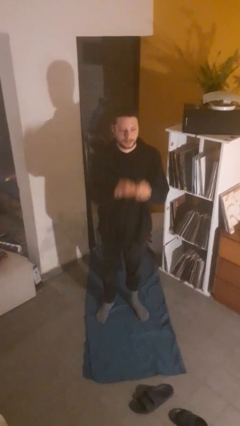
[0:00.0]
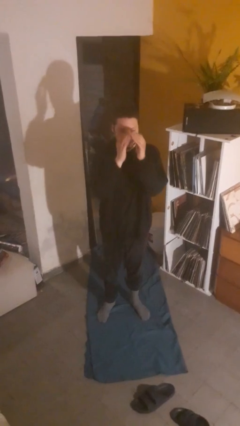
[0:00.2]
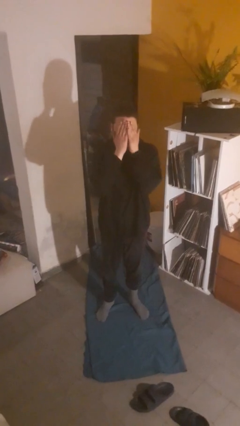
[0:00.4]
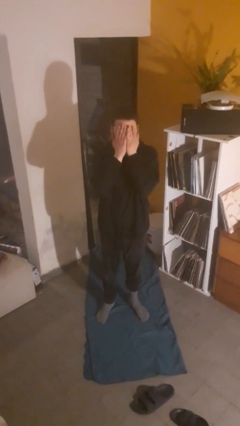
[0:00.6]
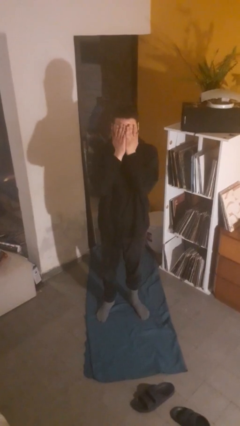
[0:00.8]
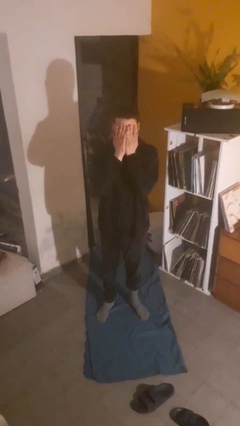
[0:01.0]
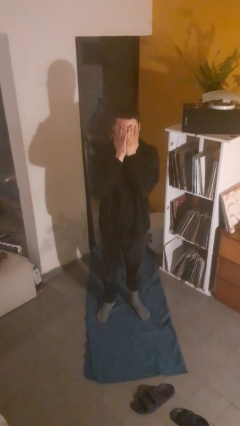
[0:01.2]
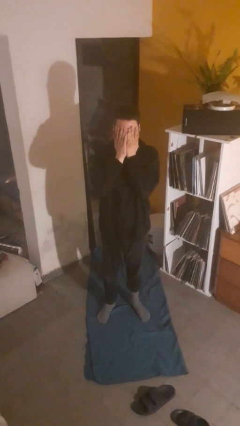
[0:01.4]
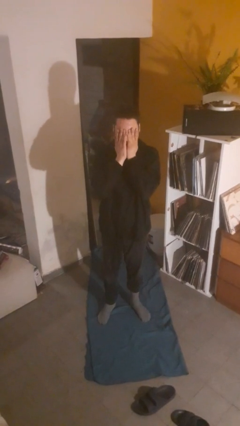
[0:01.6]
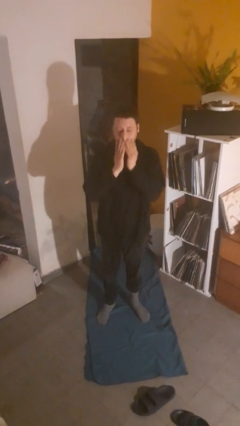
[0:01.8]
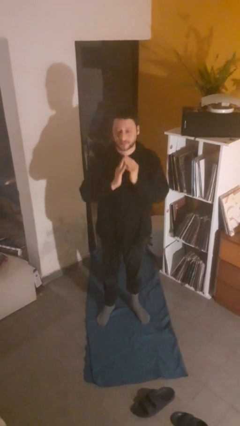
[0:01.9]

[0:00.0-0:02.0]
person covers face with hands

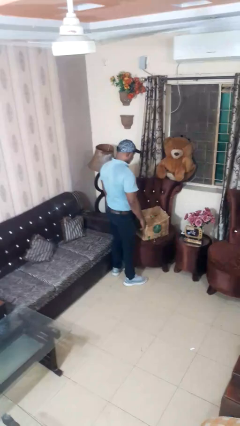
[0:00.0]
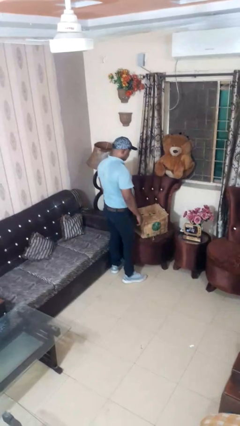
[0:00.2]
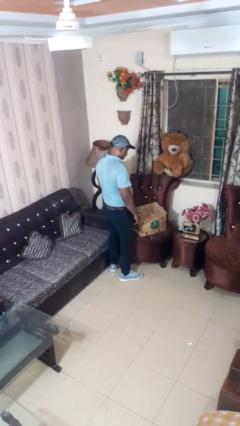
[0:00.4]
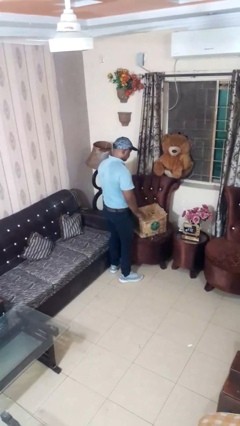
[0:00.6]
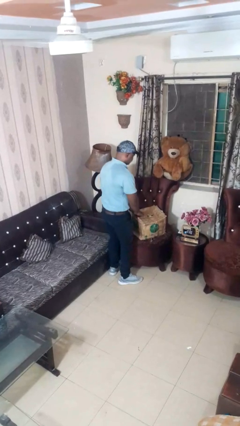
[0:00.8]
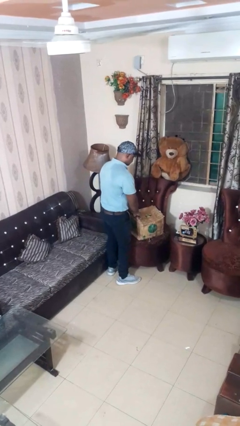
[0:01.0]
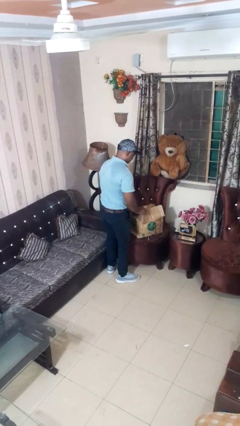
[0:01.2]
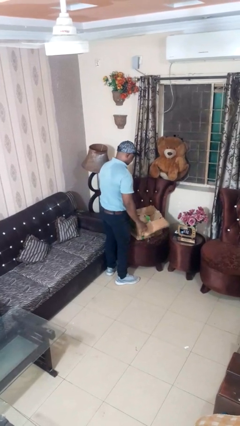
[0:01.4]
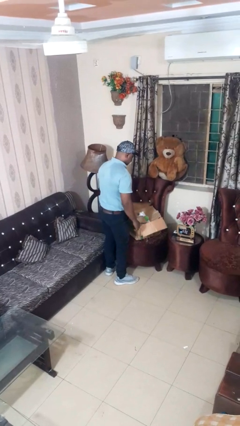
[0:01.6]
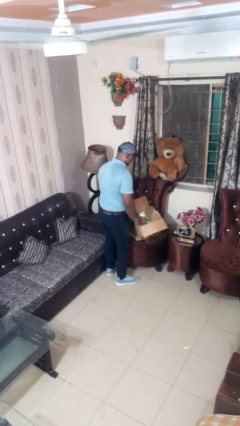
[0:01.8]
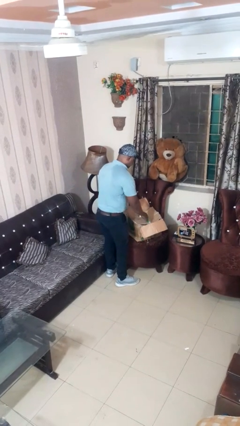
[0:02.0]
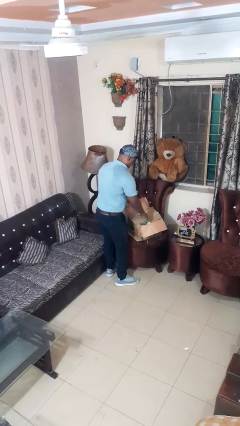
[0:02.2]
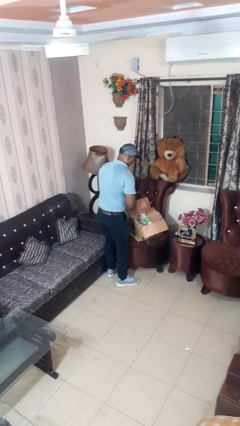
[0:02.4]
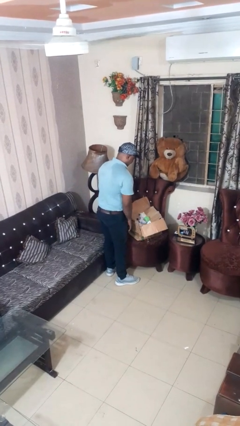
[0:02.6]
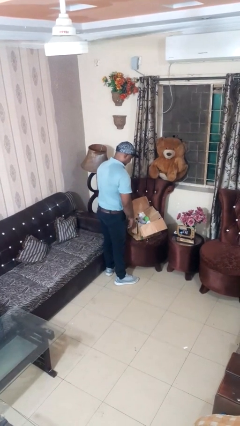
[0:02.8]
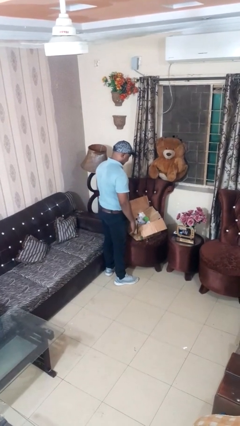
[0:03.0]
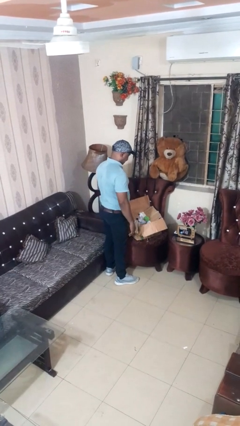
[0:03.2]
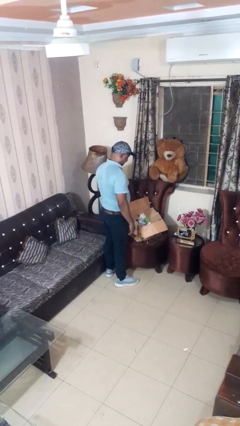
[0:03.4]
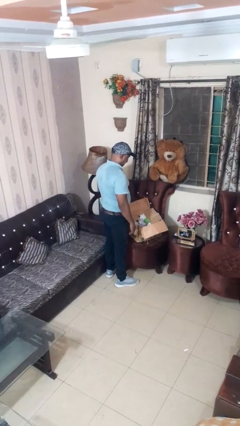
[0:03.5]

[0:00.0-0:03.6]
person opens box

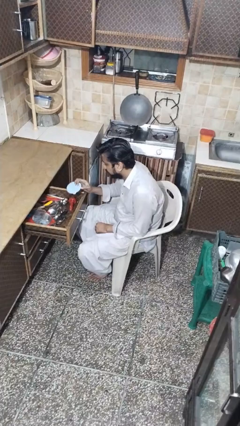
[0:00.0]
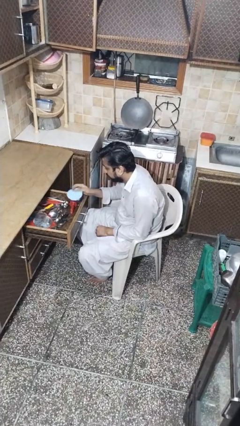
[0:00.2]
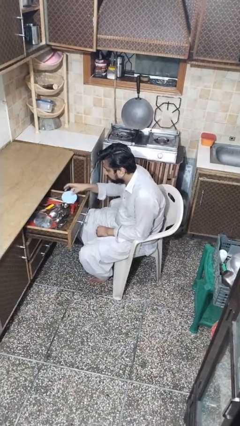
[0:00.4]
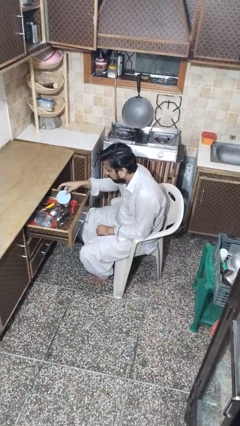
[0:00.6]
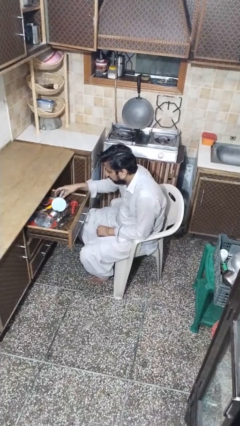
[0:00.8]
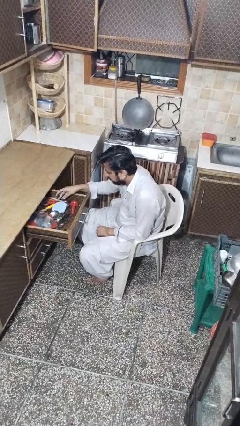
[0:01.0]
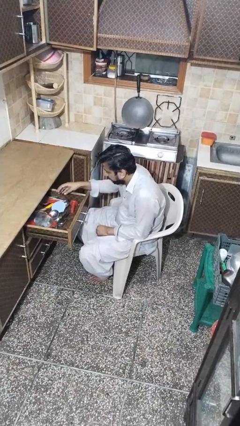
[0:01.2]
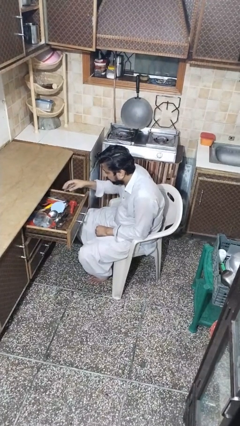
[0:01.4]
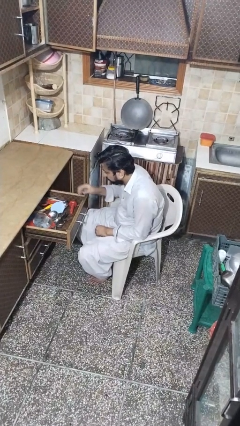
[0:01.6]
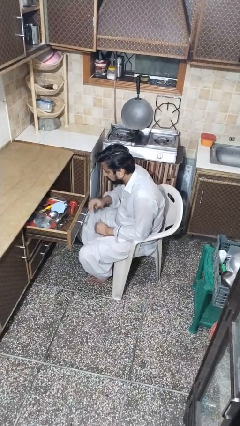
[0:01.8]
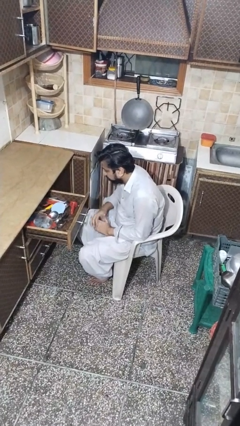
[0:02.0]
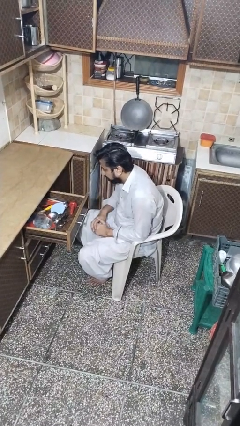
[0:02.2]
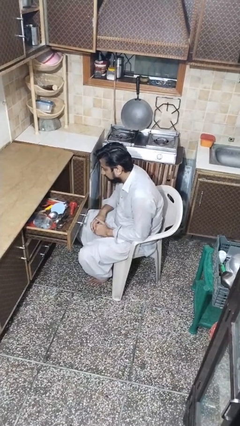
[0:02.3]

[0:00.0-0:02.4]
person puts object into kitchen drawer

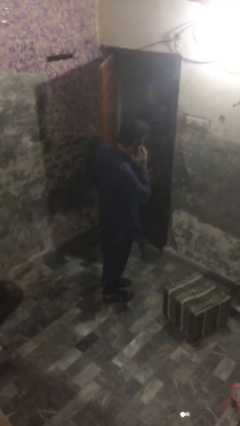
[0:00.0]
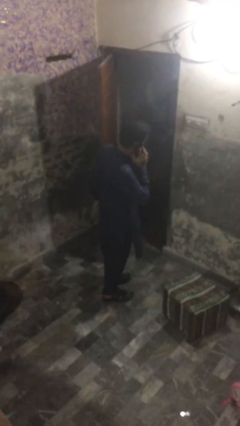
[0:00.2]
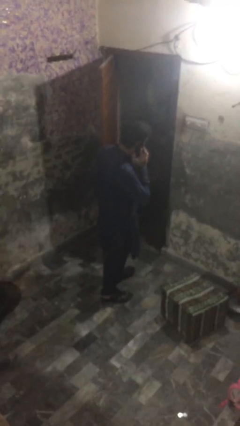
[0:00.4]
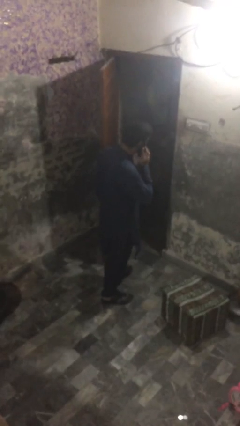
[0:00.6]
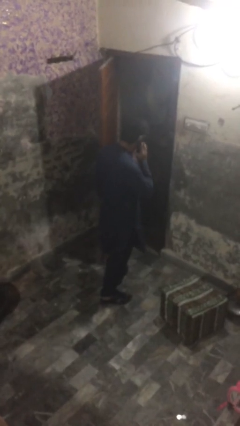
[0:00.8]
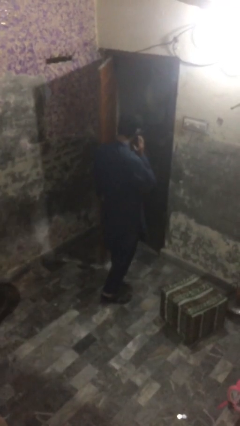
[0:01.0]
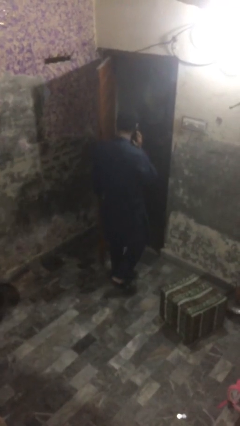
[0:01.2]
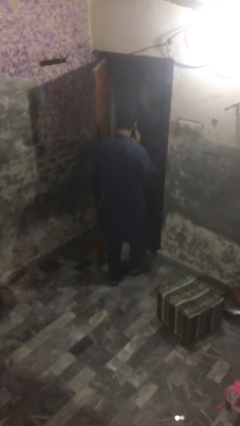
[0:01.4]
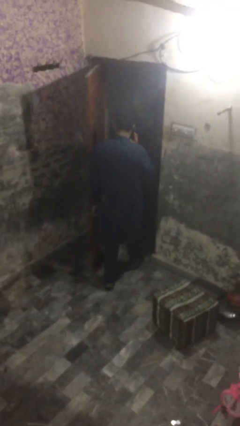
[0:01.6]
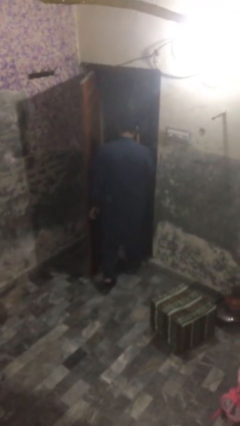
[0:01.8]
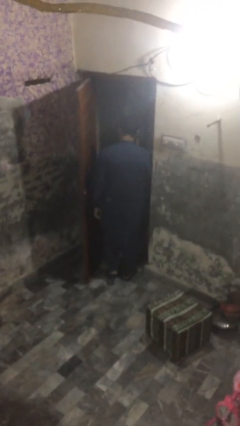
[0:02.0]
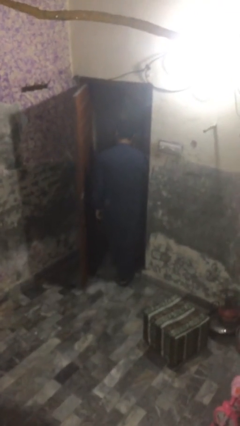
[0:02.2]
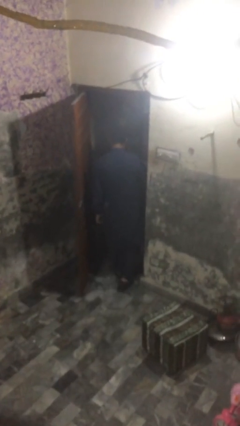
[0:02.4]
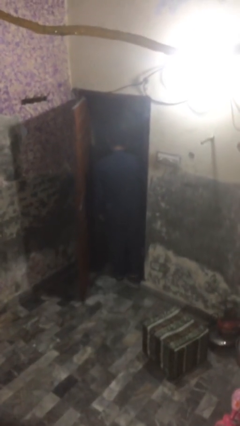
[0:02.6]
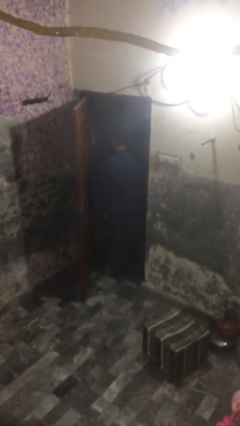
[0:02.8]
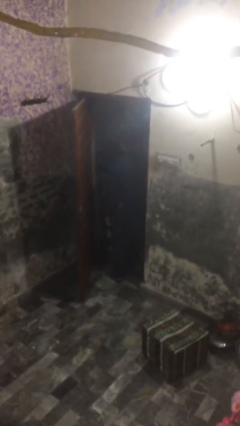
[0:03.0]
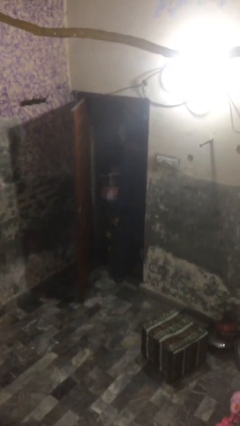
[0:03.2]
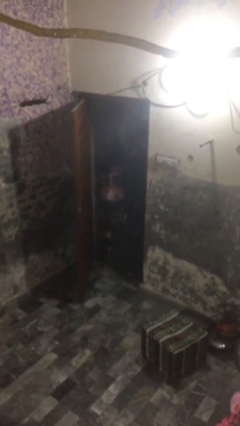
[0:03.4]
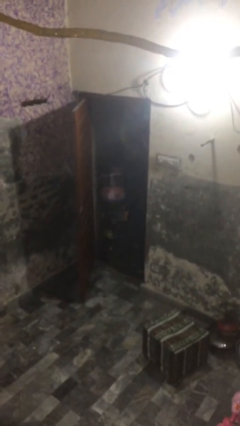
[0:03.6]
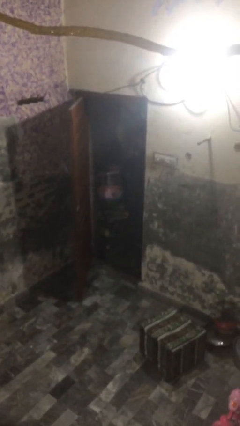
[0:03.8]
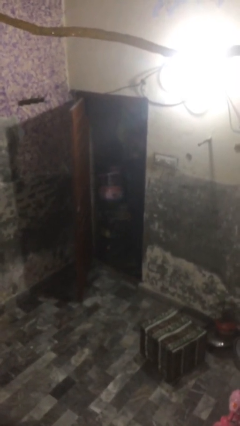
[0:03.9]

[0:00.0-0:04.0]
person exits scene through structure

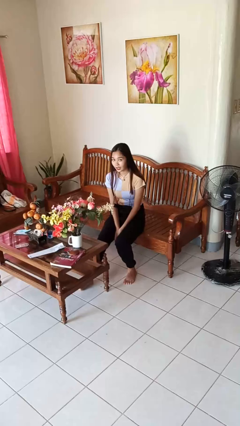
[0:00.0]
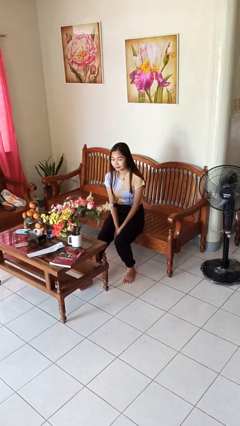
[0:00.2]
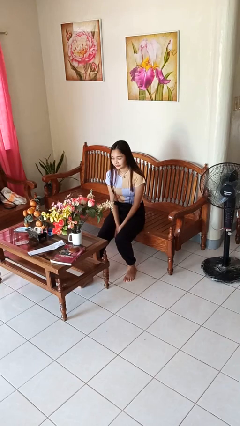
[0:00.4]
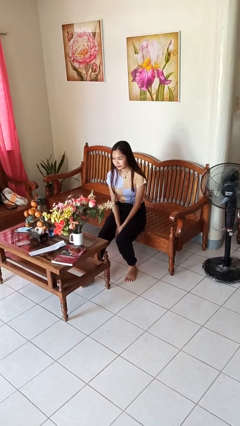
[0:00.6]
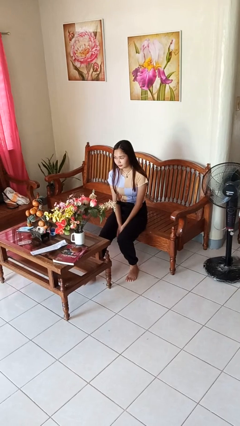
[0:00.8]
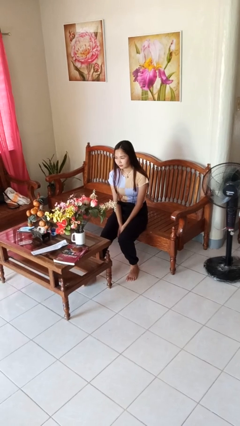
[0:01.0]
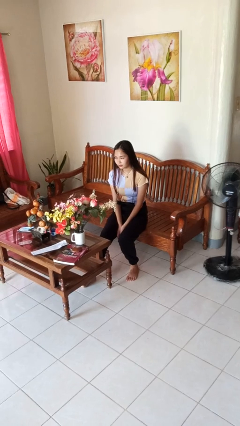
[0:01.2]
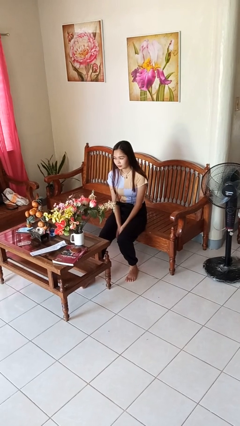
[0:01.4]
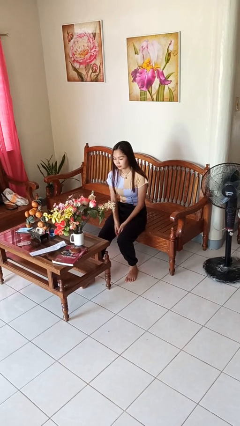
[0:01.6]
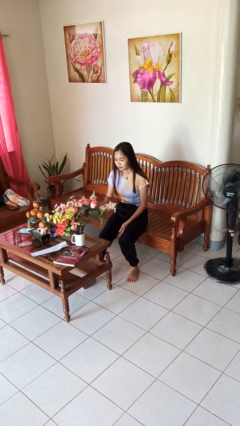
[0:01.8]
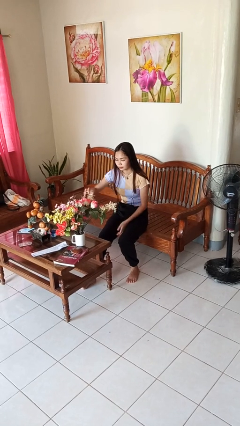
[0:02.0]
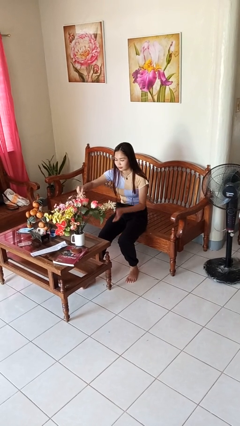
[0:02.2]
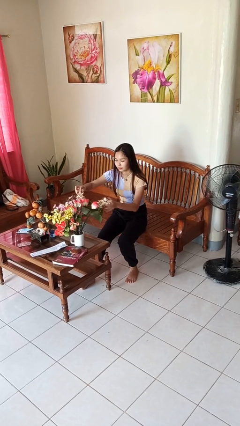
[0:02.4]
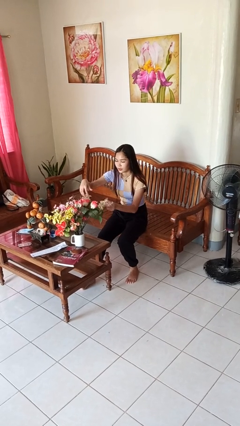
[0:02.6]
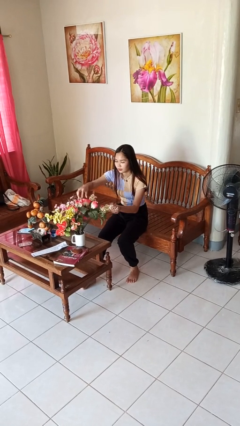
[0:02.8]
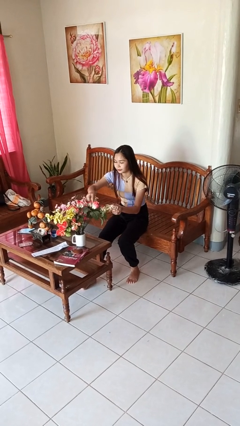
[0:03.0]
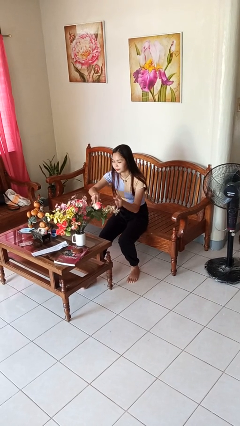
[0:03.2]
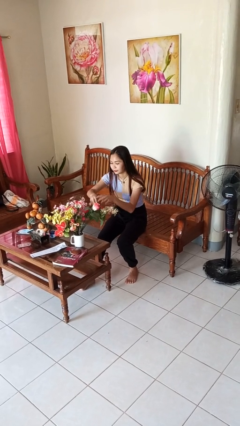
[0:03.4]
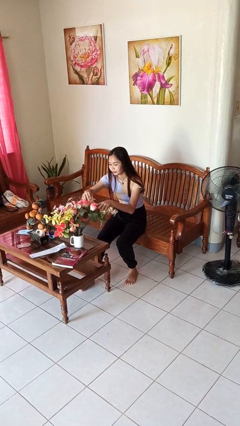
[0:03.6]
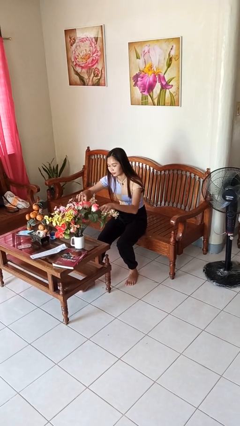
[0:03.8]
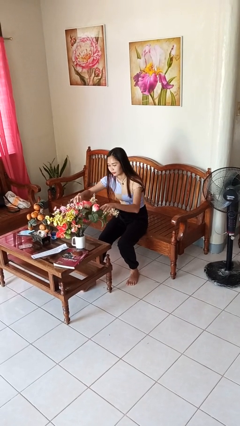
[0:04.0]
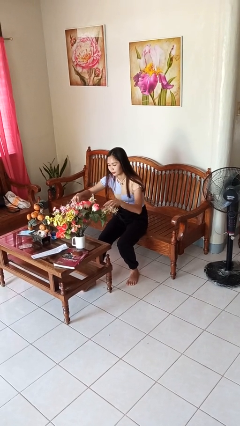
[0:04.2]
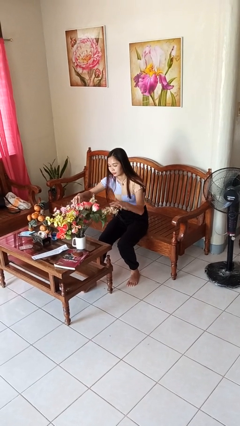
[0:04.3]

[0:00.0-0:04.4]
person arranges flowers in vase

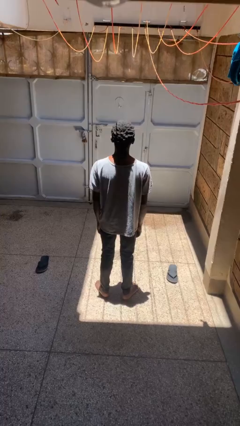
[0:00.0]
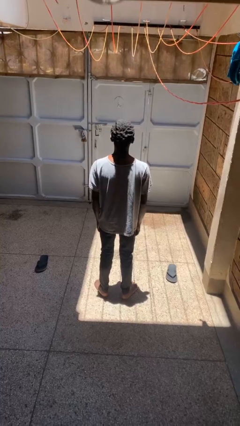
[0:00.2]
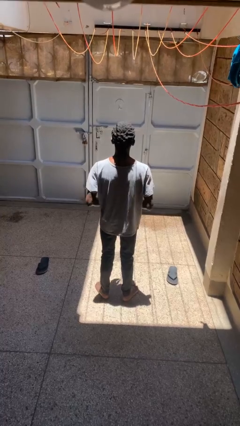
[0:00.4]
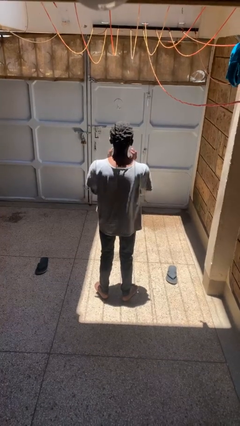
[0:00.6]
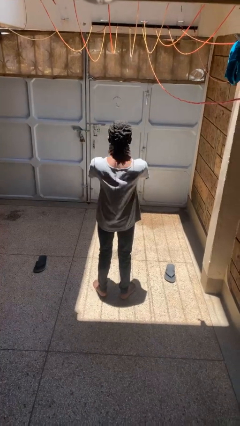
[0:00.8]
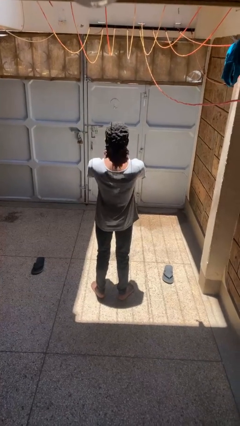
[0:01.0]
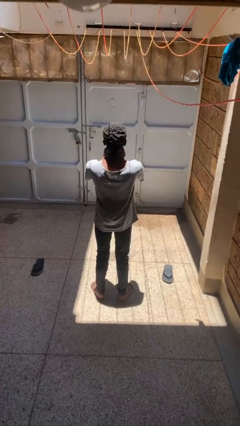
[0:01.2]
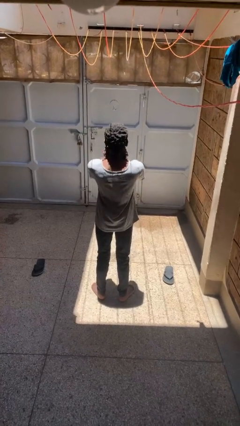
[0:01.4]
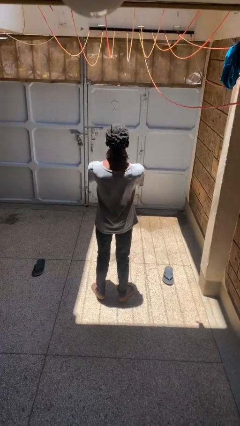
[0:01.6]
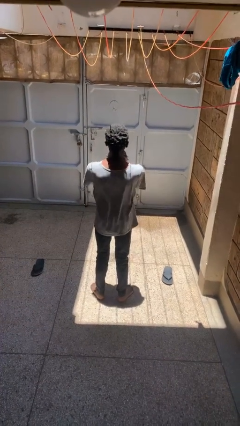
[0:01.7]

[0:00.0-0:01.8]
person rubs neck
